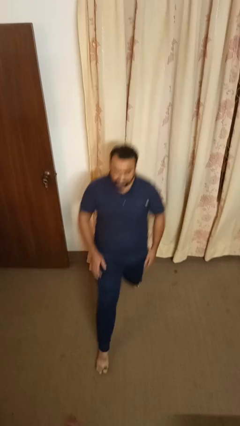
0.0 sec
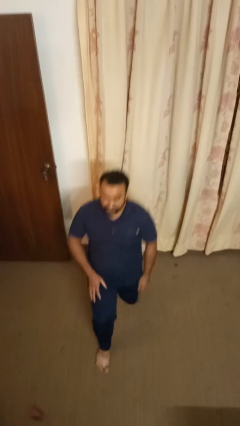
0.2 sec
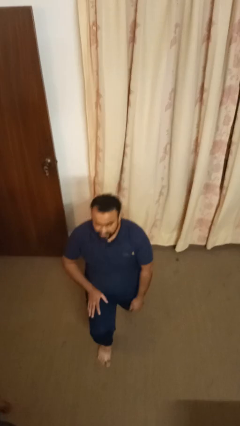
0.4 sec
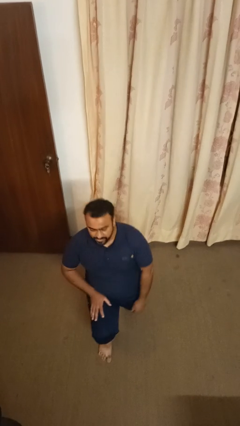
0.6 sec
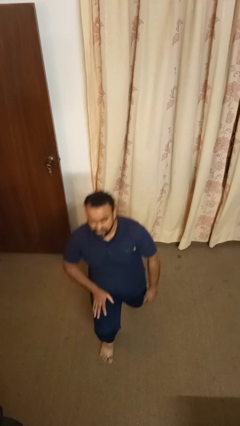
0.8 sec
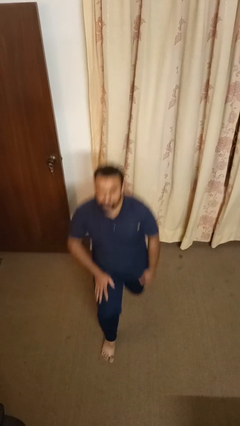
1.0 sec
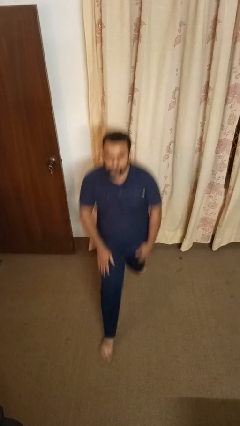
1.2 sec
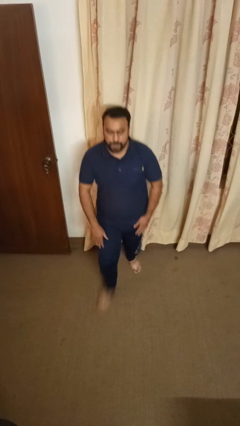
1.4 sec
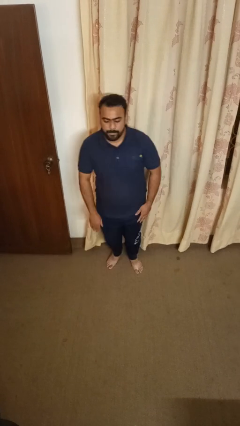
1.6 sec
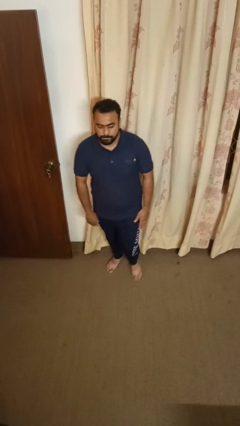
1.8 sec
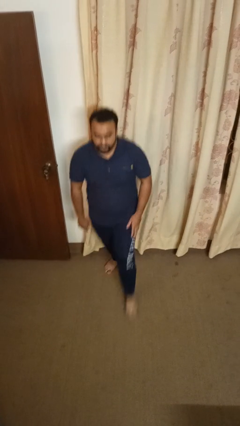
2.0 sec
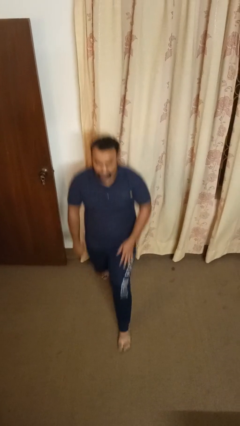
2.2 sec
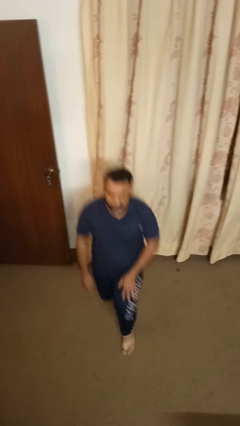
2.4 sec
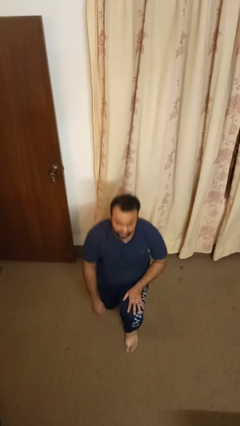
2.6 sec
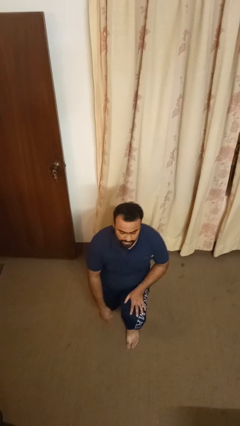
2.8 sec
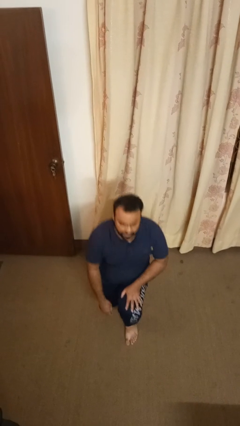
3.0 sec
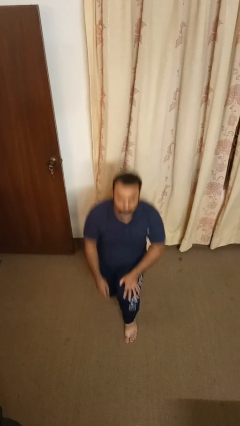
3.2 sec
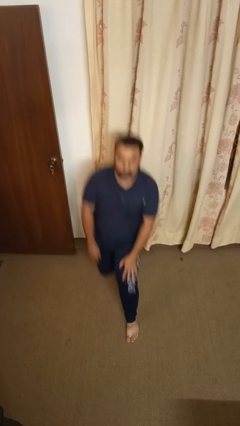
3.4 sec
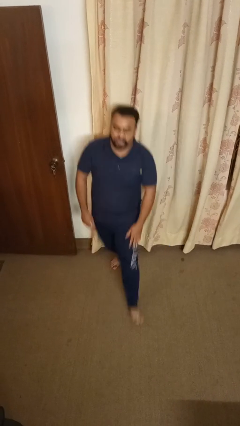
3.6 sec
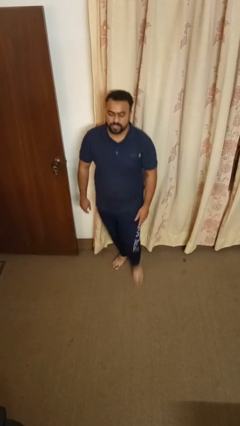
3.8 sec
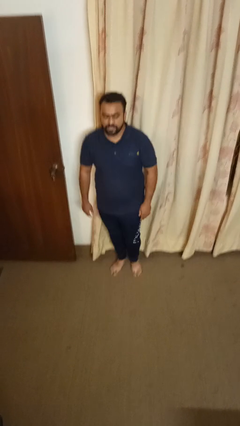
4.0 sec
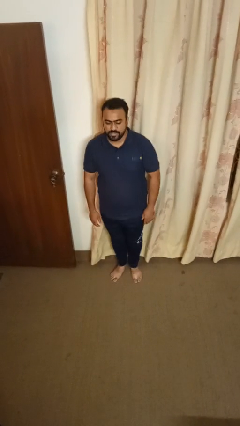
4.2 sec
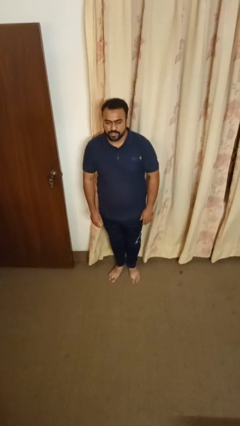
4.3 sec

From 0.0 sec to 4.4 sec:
person exercises with lunges

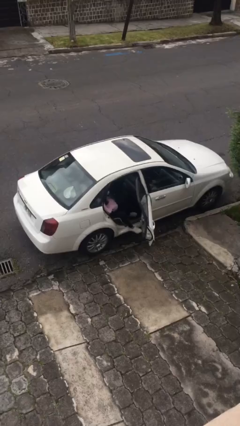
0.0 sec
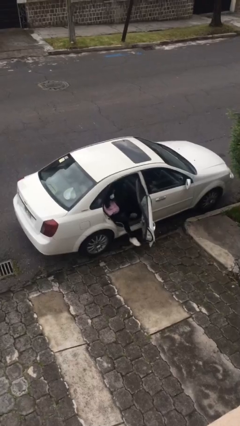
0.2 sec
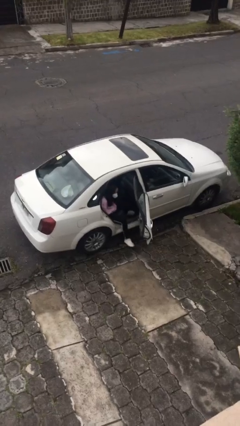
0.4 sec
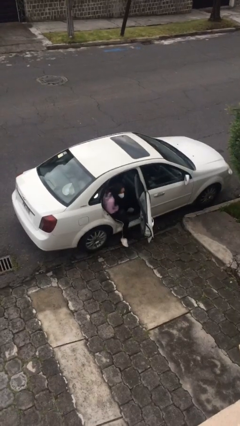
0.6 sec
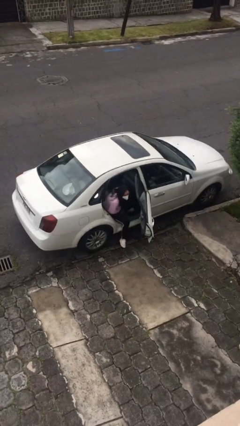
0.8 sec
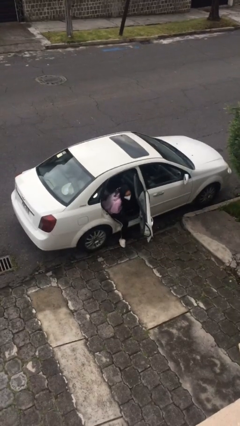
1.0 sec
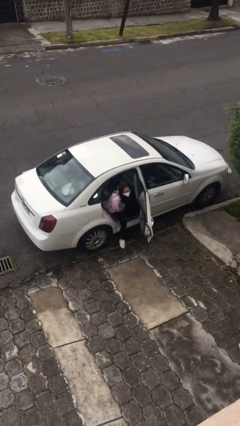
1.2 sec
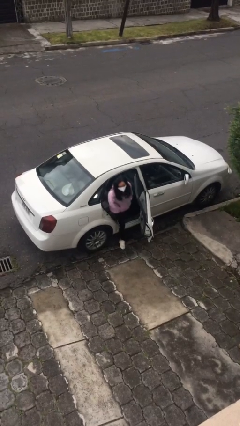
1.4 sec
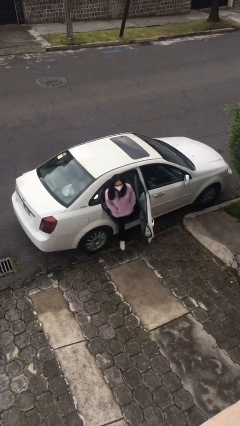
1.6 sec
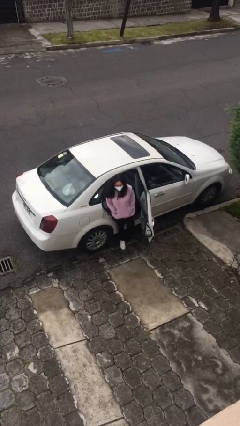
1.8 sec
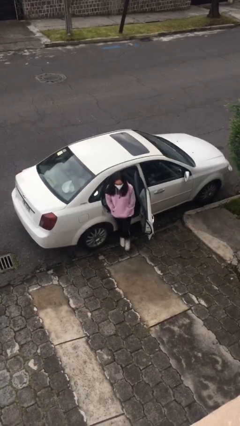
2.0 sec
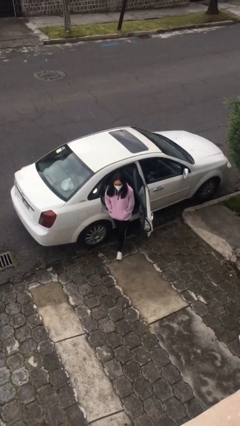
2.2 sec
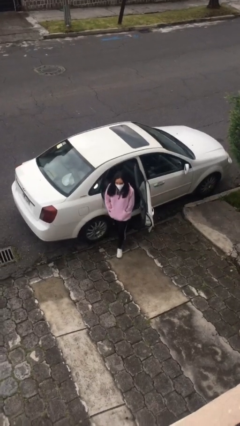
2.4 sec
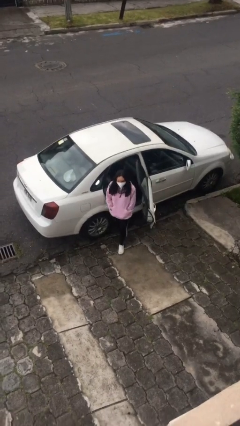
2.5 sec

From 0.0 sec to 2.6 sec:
person exits car

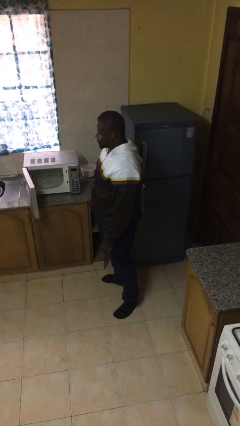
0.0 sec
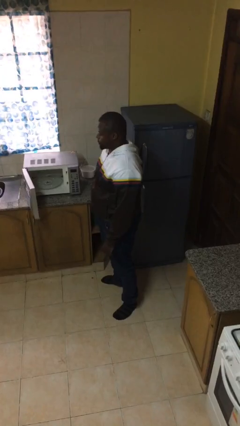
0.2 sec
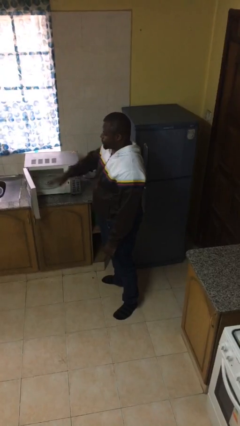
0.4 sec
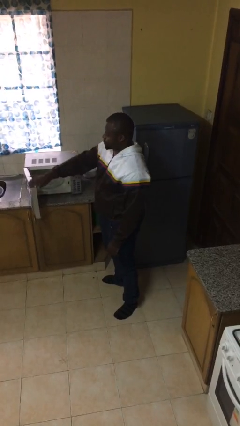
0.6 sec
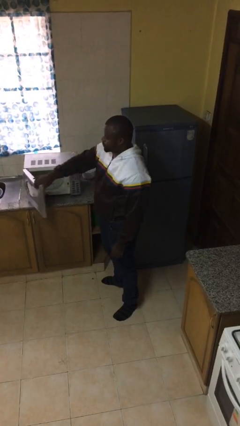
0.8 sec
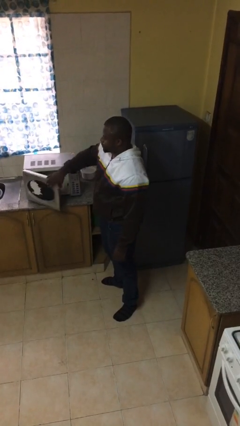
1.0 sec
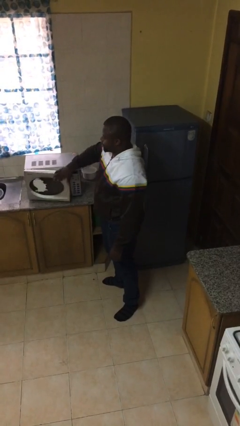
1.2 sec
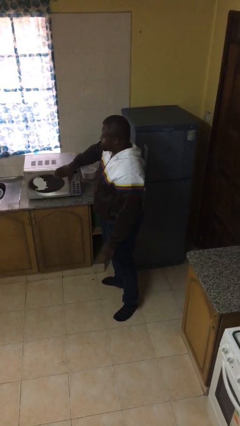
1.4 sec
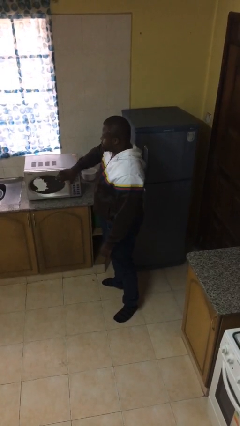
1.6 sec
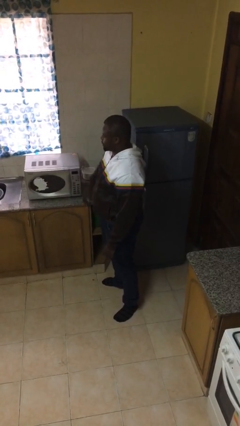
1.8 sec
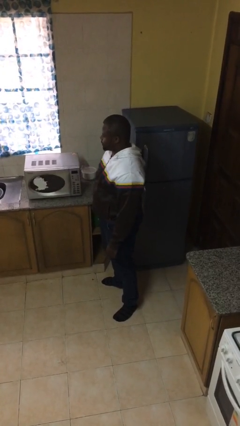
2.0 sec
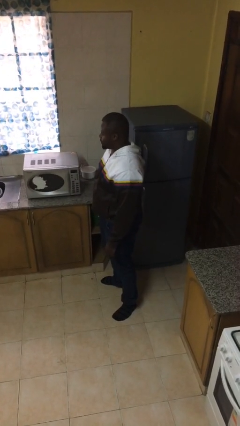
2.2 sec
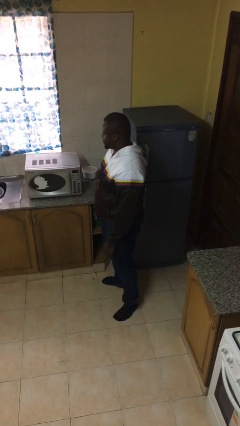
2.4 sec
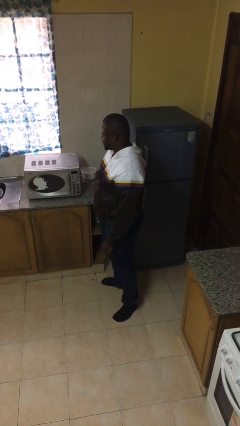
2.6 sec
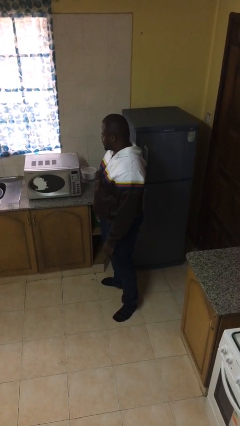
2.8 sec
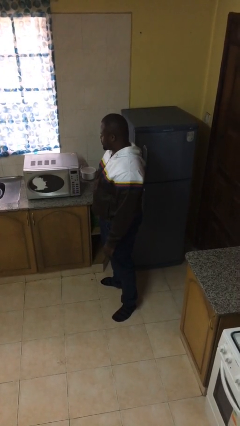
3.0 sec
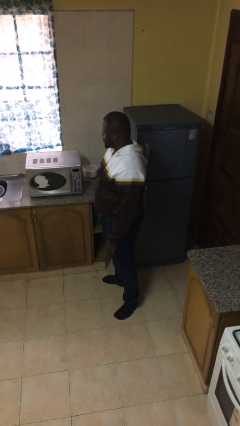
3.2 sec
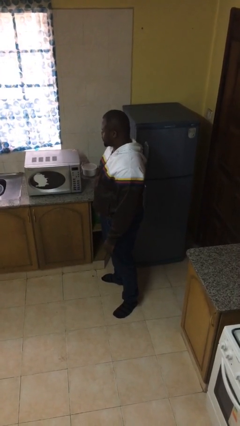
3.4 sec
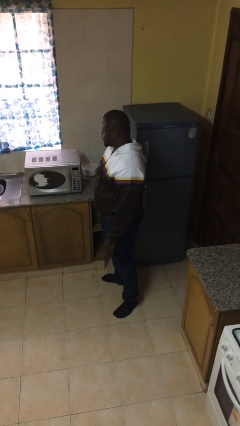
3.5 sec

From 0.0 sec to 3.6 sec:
person closes microwave

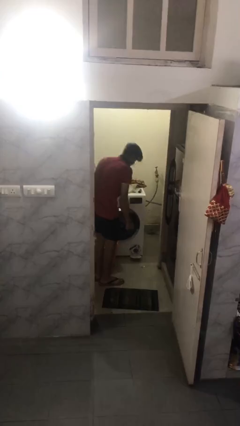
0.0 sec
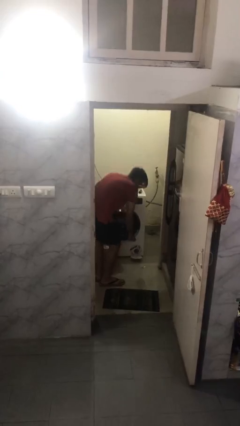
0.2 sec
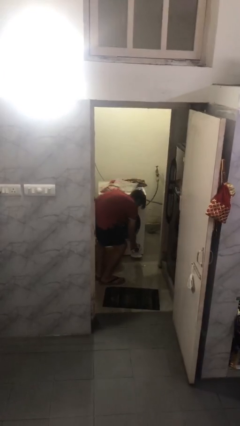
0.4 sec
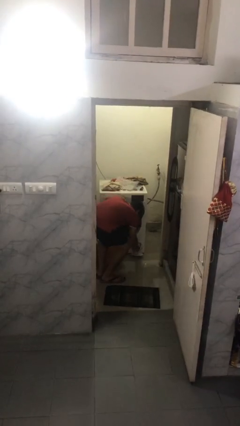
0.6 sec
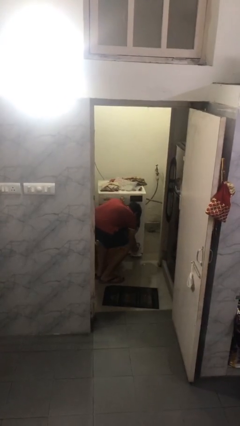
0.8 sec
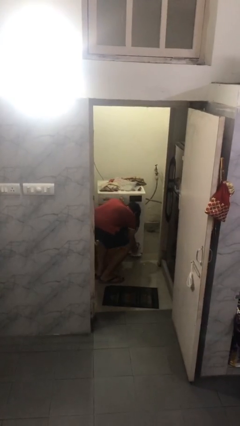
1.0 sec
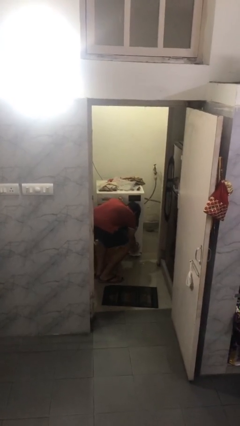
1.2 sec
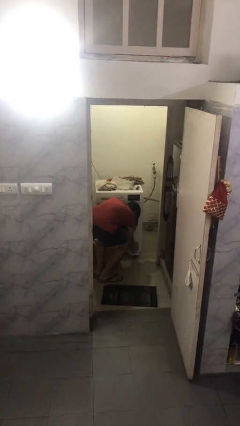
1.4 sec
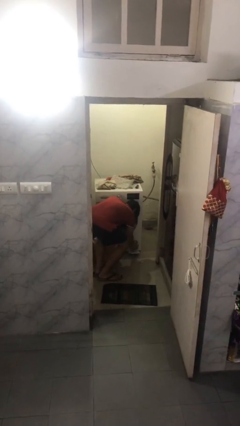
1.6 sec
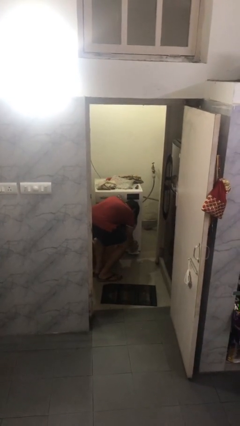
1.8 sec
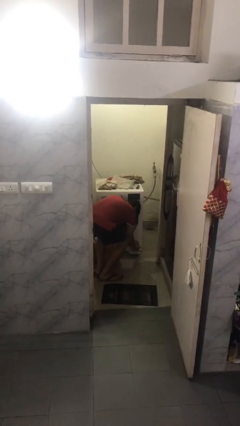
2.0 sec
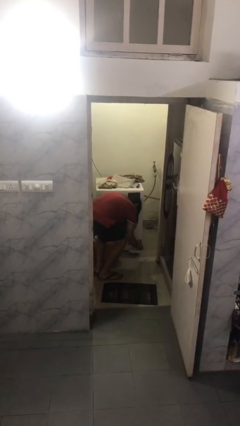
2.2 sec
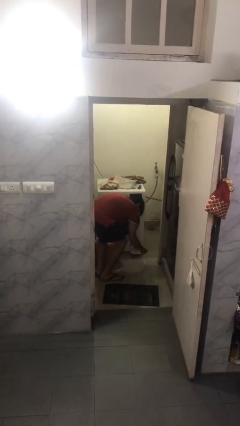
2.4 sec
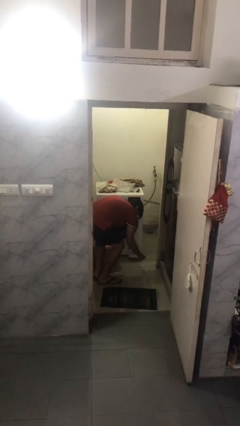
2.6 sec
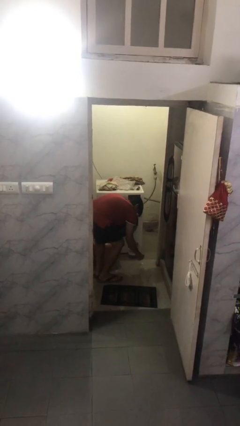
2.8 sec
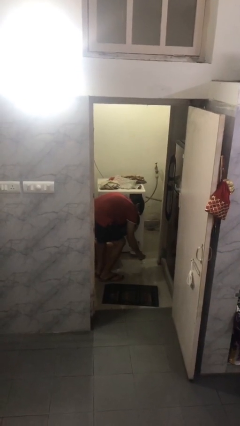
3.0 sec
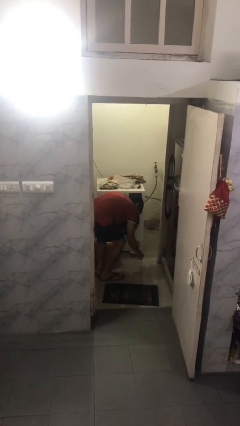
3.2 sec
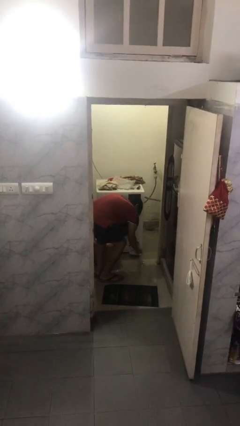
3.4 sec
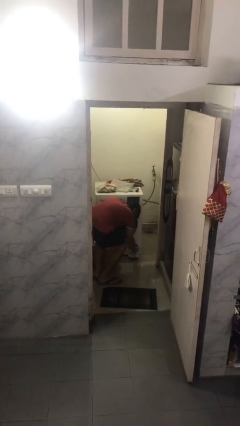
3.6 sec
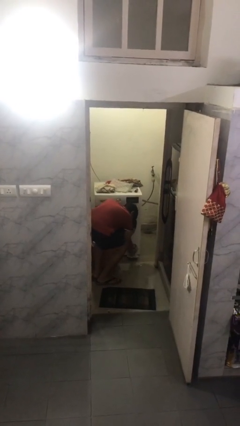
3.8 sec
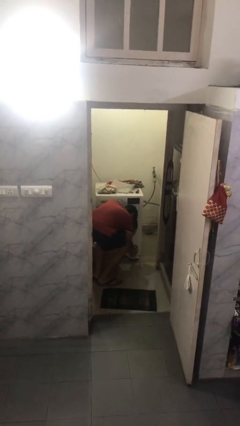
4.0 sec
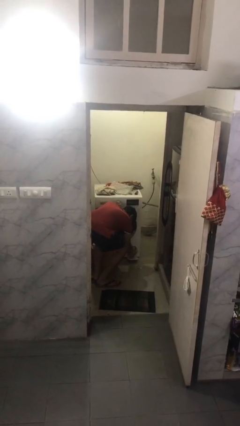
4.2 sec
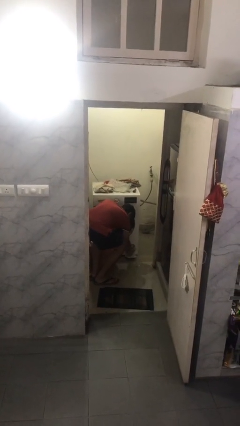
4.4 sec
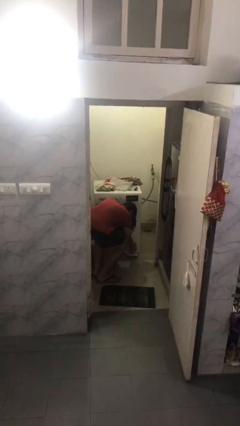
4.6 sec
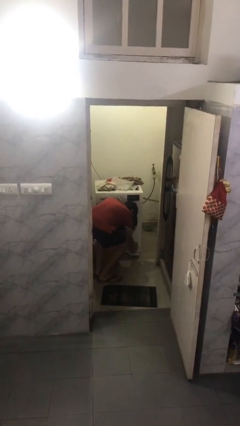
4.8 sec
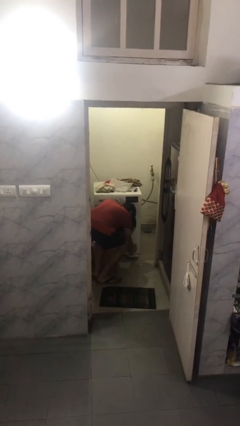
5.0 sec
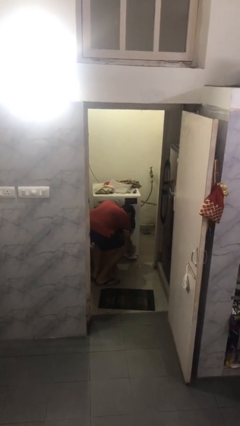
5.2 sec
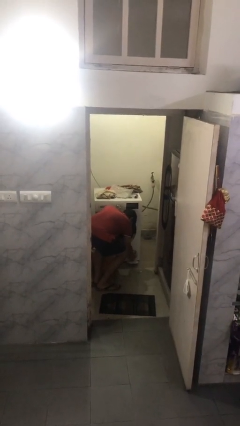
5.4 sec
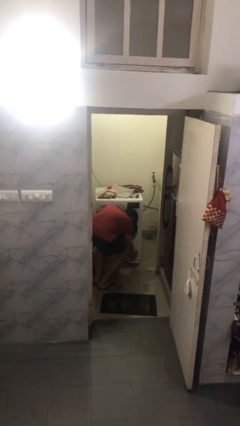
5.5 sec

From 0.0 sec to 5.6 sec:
person cleans dryer lint trap

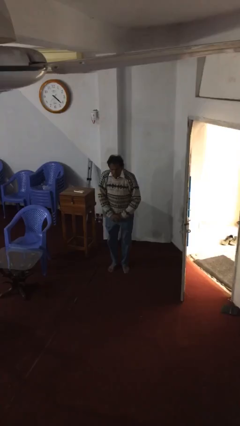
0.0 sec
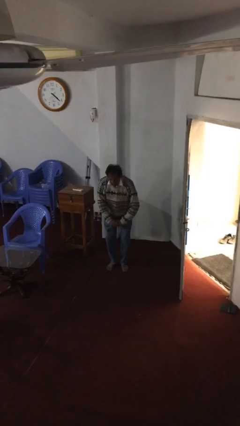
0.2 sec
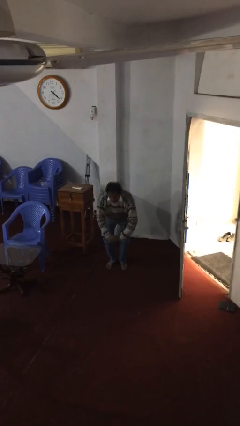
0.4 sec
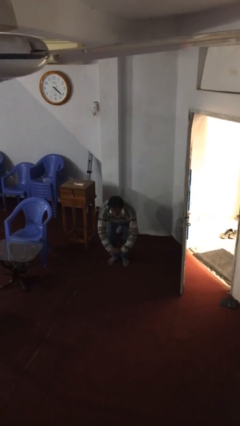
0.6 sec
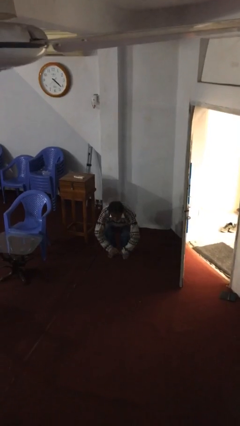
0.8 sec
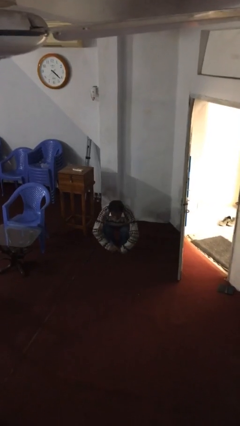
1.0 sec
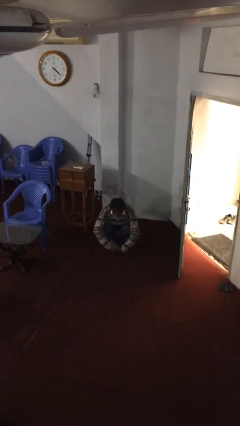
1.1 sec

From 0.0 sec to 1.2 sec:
person sits down

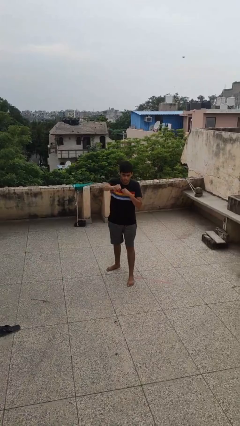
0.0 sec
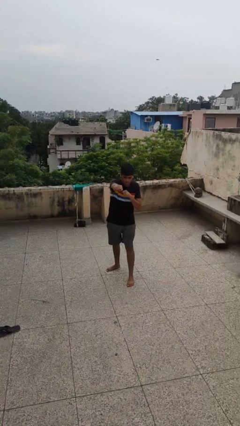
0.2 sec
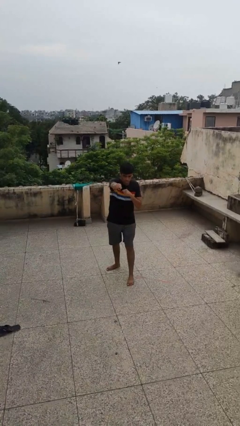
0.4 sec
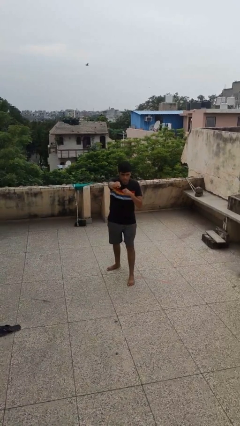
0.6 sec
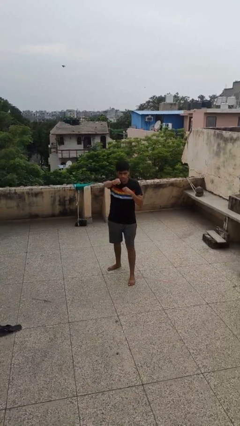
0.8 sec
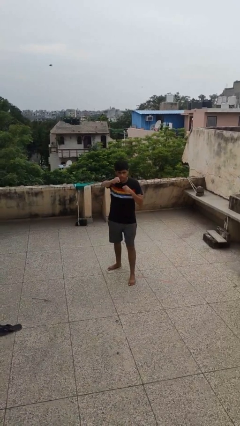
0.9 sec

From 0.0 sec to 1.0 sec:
person punches
